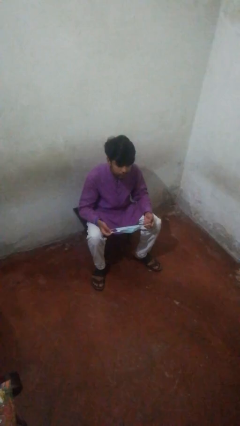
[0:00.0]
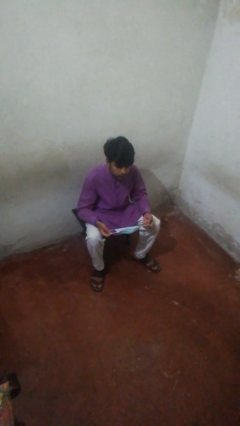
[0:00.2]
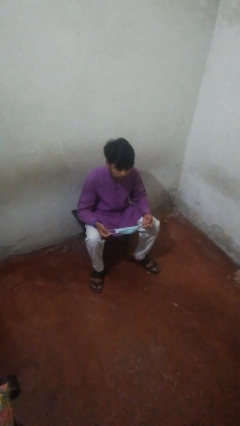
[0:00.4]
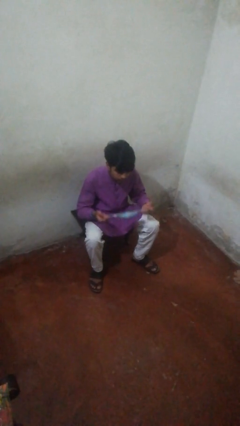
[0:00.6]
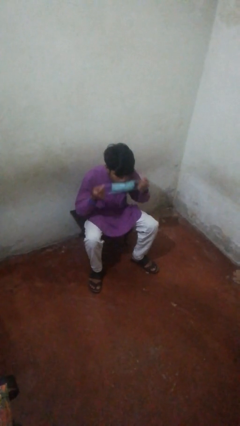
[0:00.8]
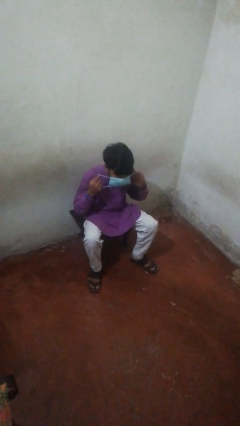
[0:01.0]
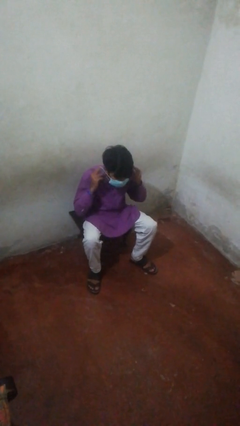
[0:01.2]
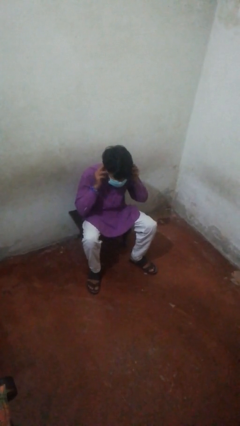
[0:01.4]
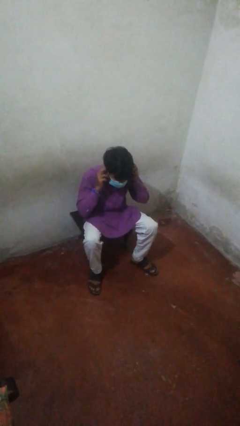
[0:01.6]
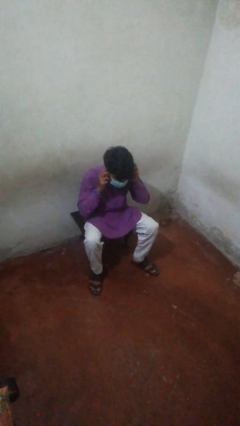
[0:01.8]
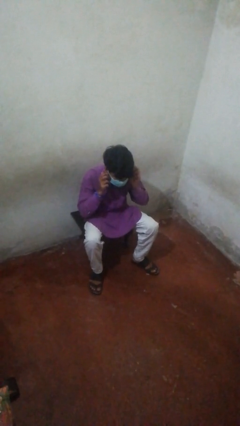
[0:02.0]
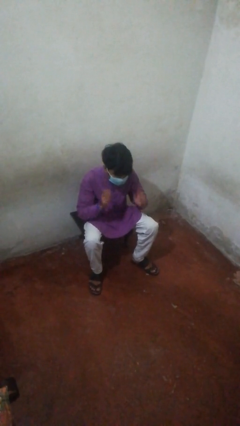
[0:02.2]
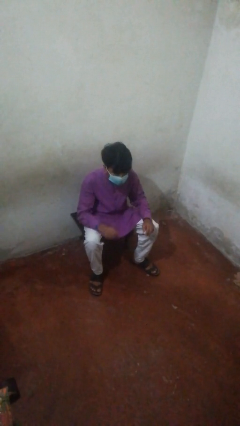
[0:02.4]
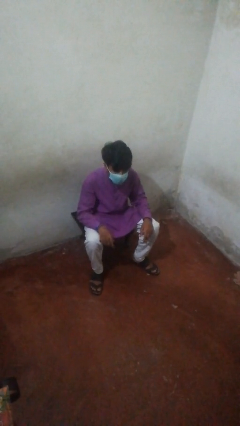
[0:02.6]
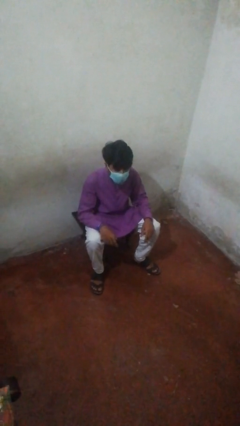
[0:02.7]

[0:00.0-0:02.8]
person puts on facemask

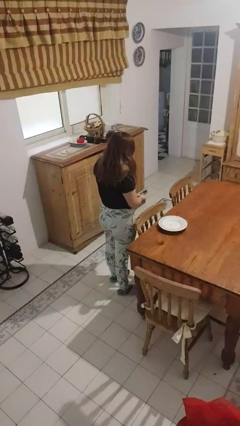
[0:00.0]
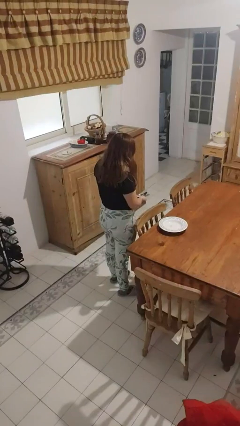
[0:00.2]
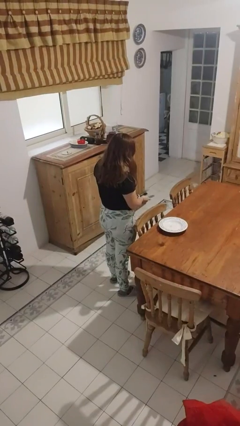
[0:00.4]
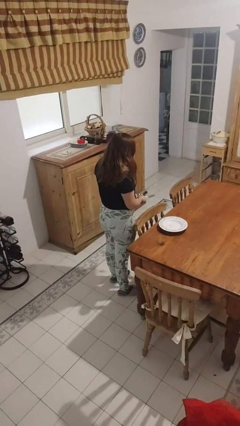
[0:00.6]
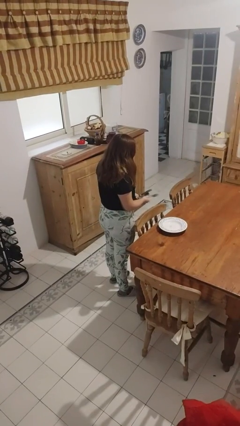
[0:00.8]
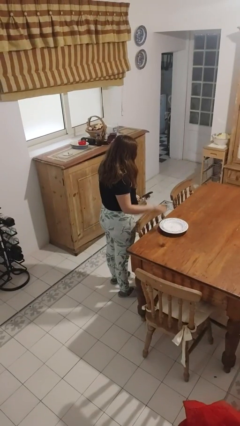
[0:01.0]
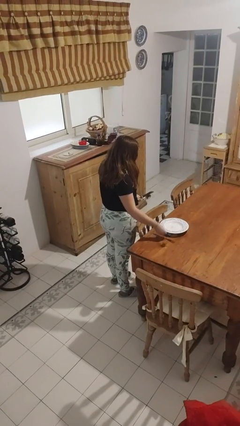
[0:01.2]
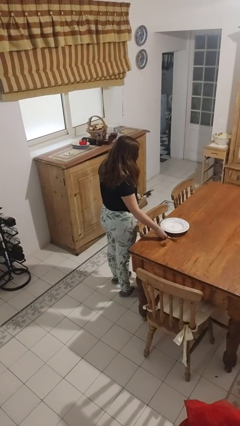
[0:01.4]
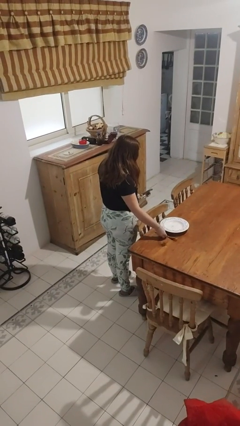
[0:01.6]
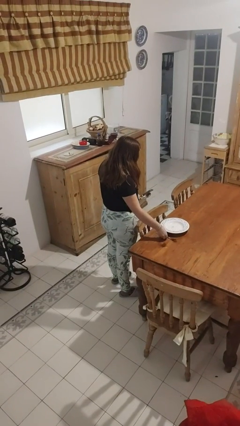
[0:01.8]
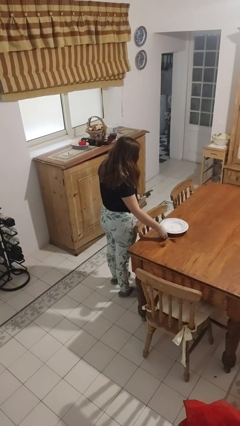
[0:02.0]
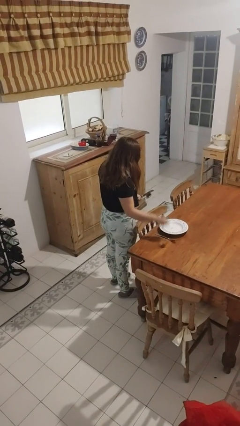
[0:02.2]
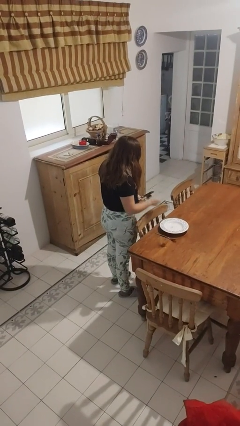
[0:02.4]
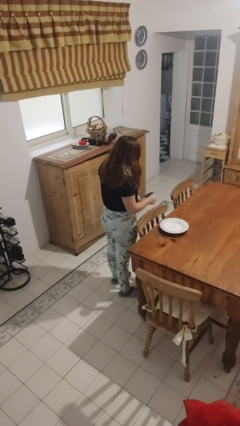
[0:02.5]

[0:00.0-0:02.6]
person sets table

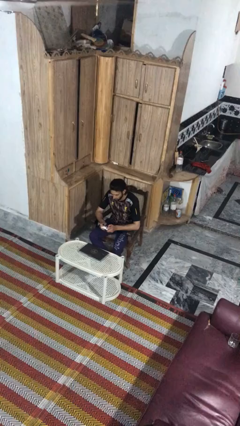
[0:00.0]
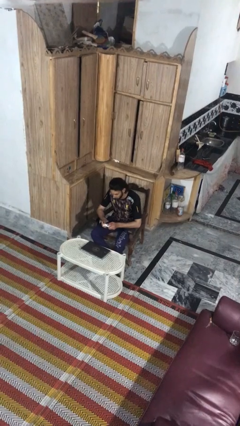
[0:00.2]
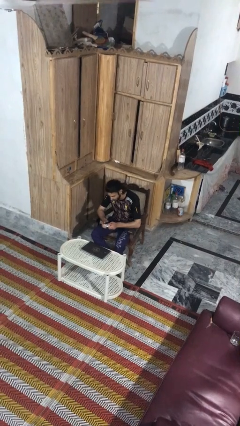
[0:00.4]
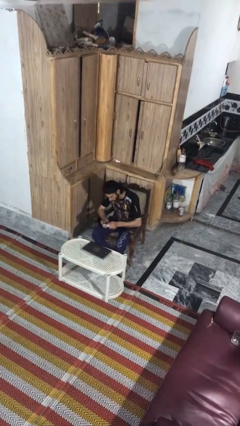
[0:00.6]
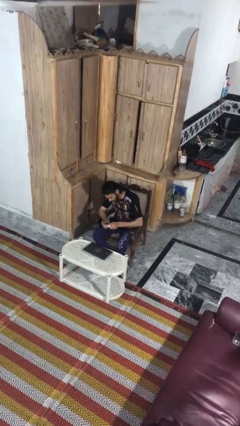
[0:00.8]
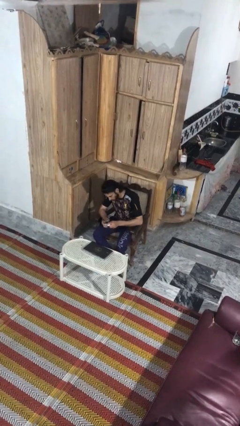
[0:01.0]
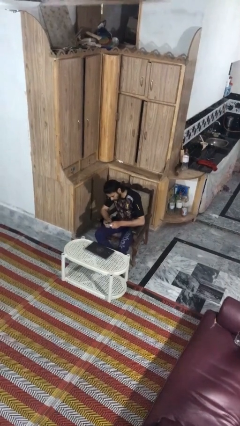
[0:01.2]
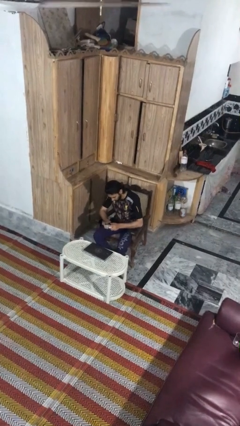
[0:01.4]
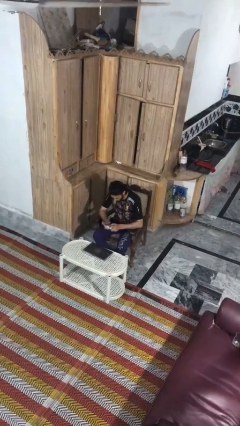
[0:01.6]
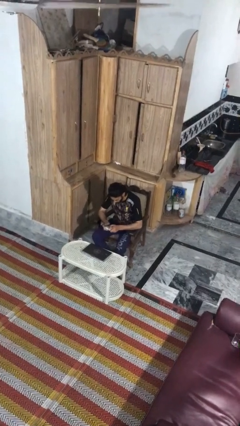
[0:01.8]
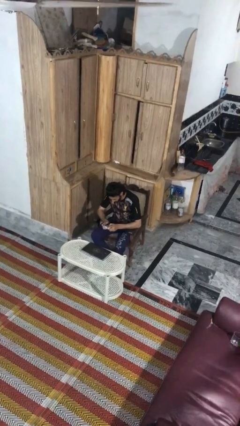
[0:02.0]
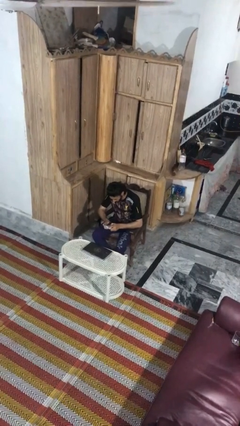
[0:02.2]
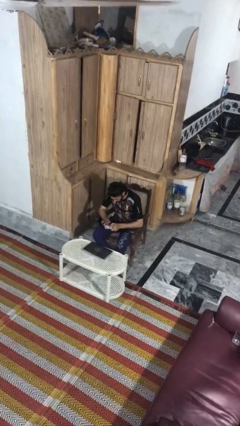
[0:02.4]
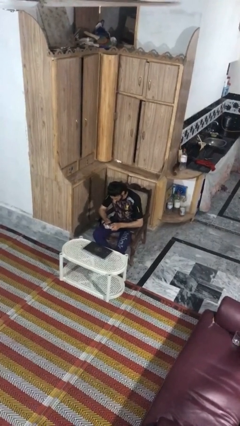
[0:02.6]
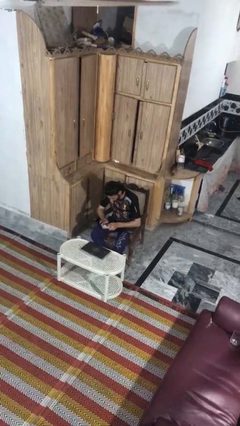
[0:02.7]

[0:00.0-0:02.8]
person interacts with handheld game

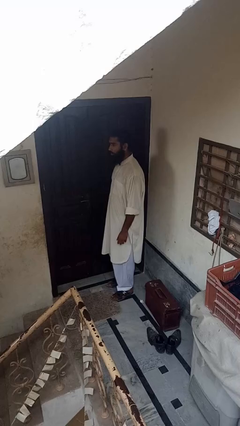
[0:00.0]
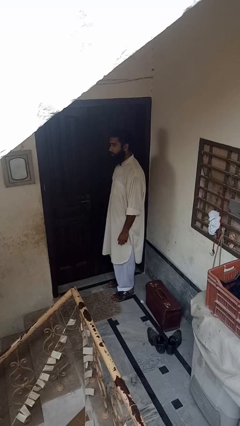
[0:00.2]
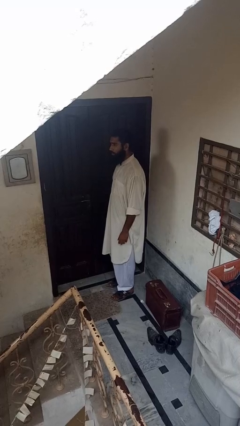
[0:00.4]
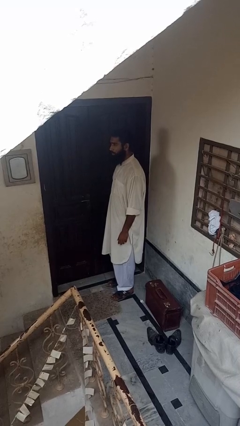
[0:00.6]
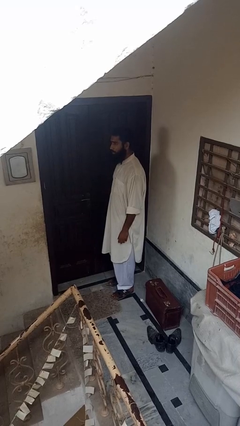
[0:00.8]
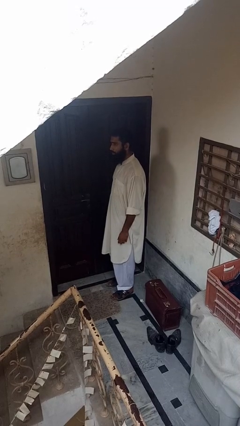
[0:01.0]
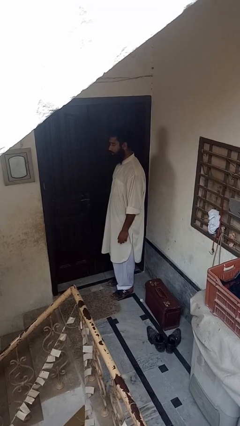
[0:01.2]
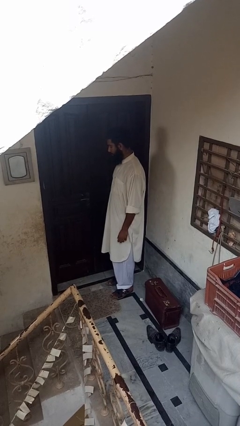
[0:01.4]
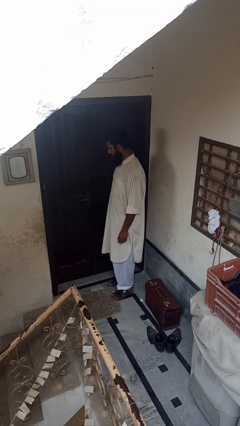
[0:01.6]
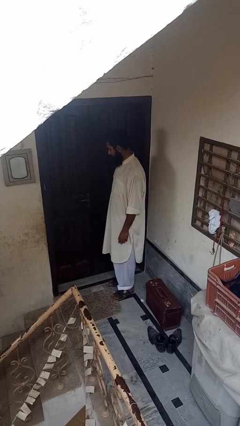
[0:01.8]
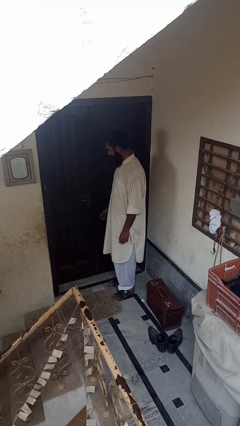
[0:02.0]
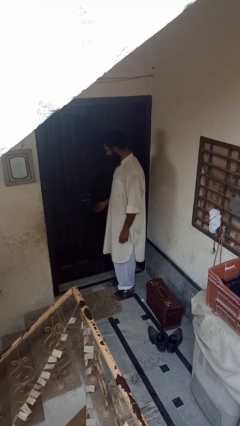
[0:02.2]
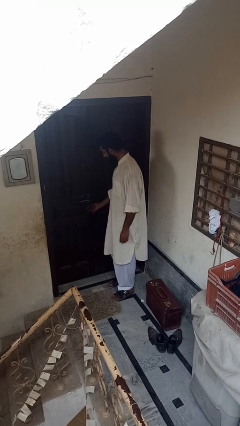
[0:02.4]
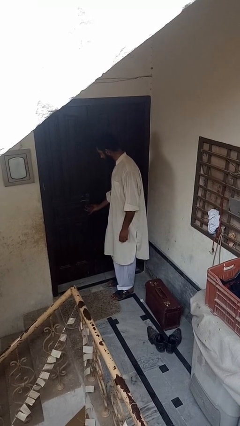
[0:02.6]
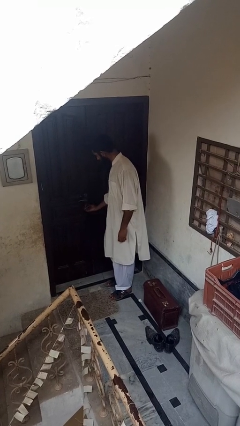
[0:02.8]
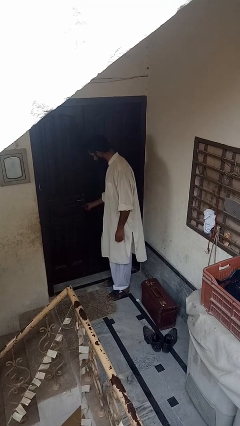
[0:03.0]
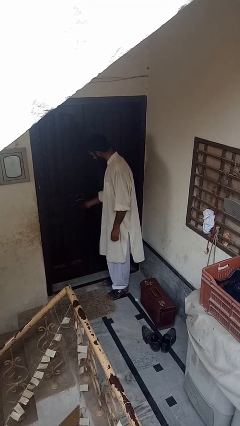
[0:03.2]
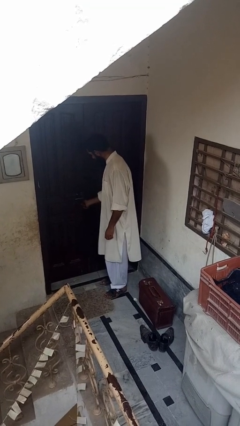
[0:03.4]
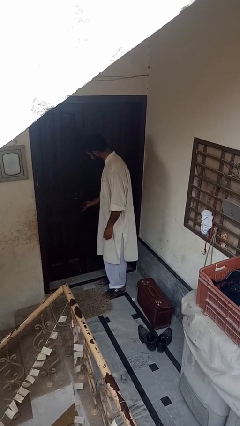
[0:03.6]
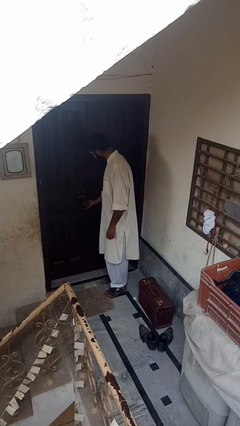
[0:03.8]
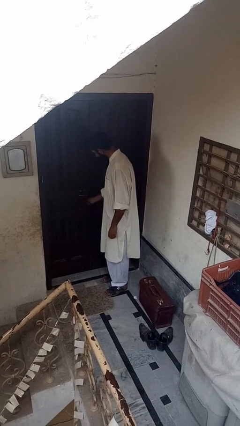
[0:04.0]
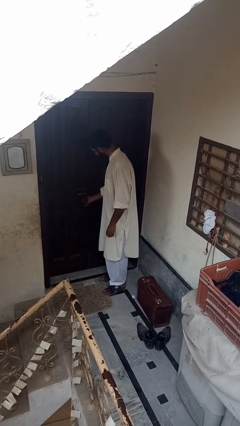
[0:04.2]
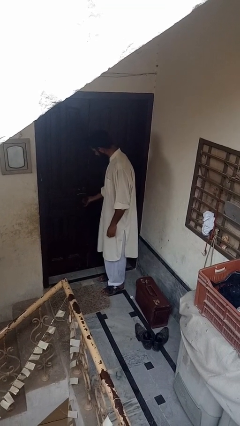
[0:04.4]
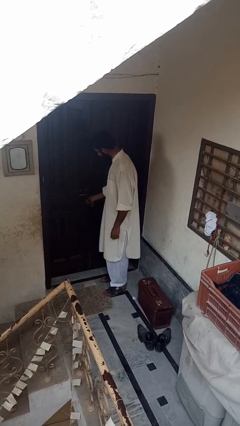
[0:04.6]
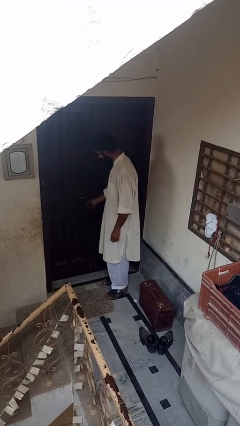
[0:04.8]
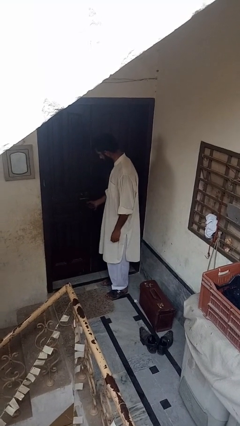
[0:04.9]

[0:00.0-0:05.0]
person unlocks door with keys

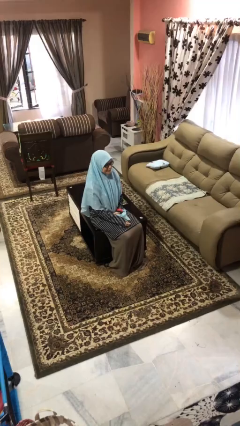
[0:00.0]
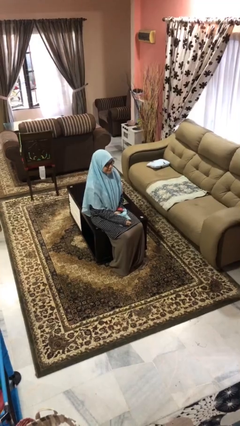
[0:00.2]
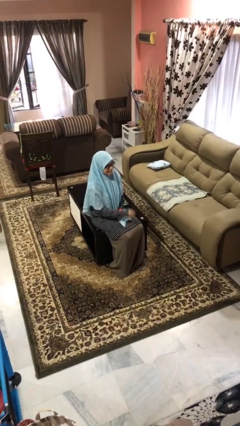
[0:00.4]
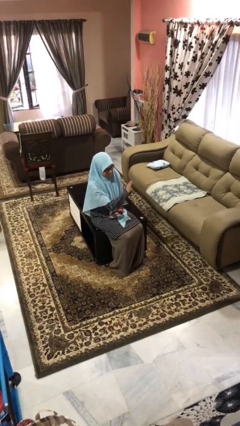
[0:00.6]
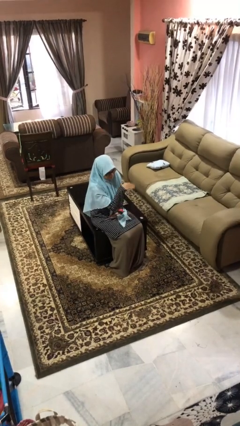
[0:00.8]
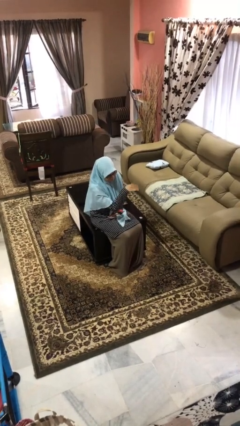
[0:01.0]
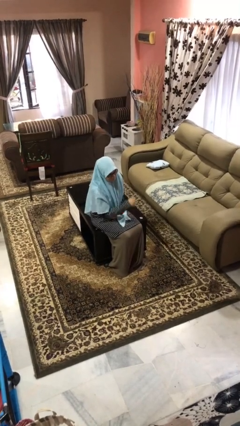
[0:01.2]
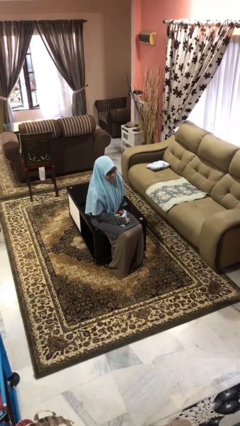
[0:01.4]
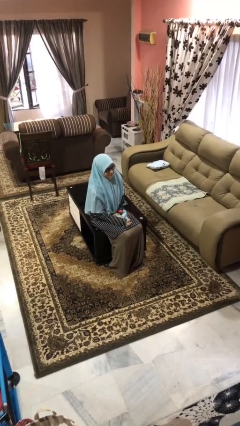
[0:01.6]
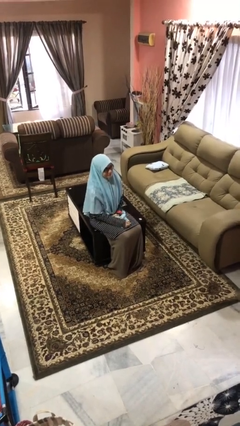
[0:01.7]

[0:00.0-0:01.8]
person gestures come here

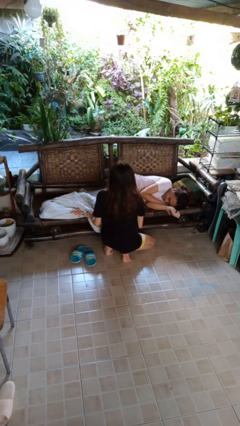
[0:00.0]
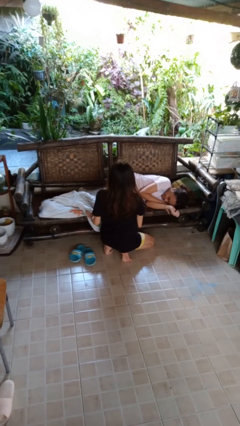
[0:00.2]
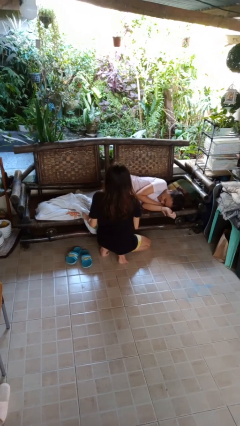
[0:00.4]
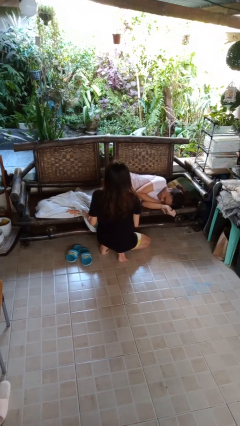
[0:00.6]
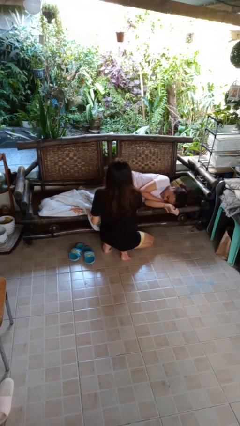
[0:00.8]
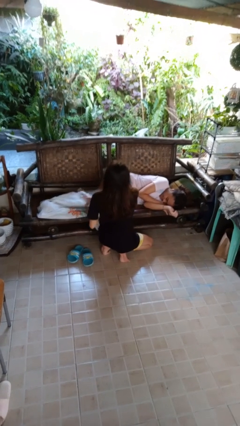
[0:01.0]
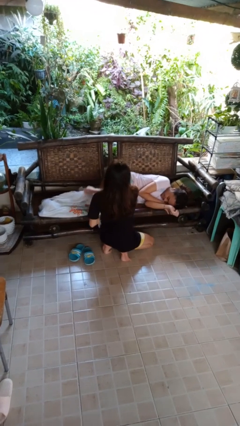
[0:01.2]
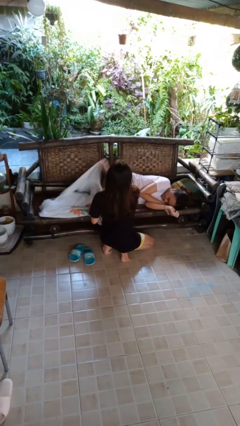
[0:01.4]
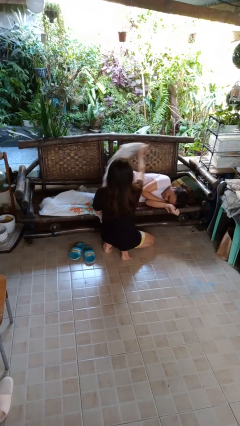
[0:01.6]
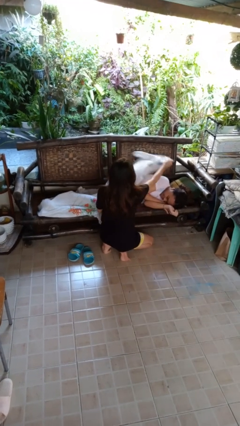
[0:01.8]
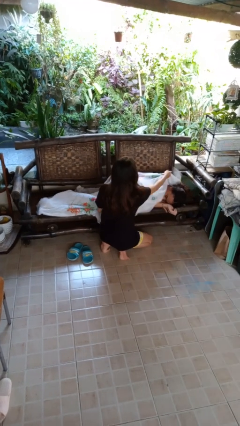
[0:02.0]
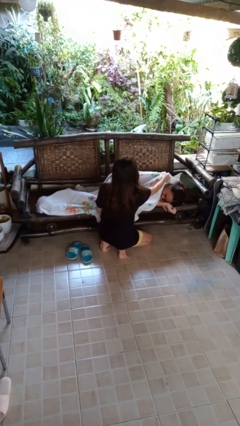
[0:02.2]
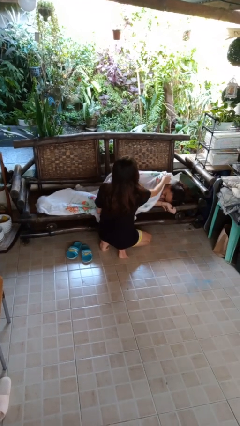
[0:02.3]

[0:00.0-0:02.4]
person covers friend with blanket
